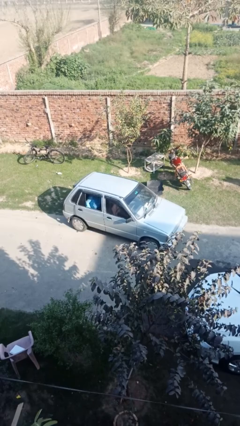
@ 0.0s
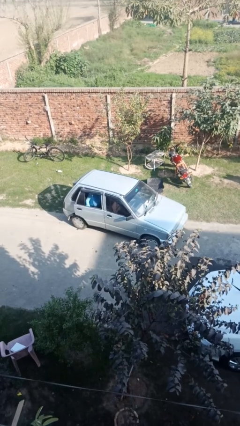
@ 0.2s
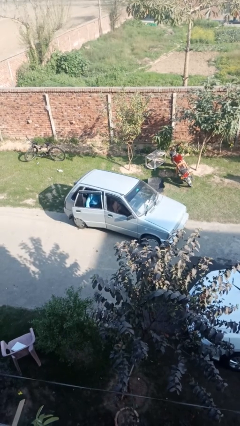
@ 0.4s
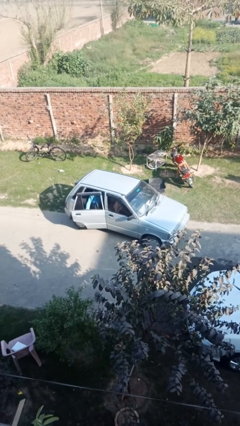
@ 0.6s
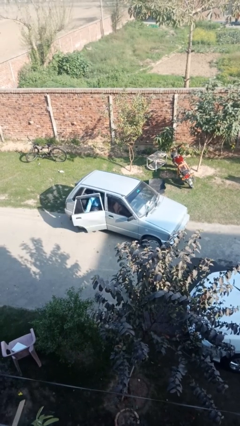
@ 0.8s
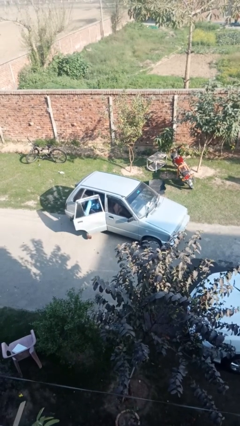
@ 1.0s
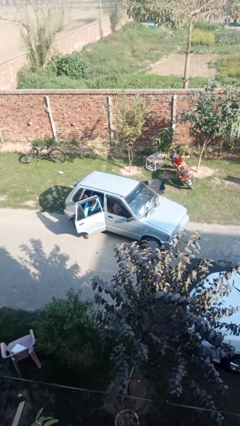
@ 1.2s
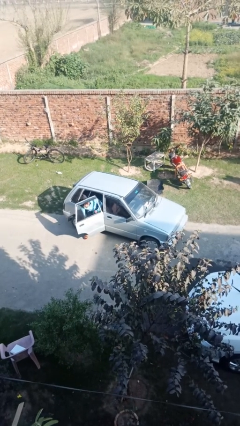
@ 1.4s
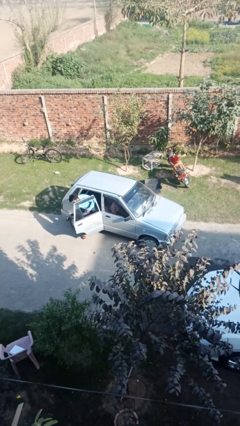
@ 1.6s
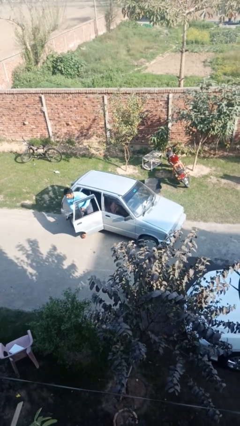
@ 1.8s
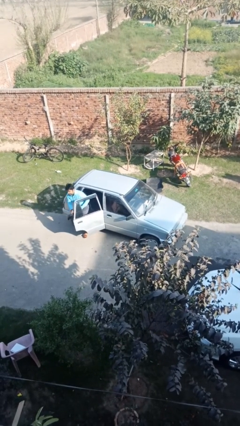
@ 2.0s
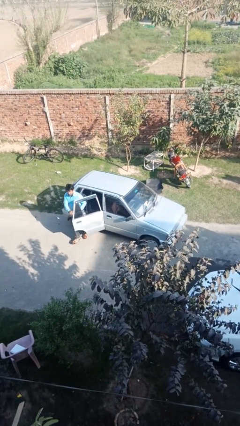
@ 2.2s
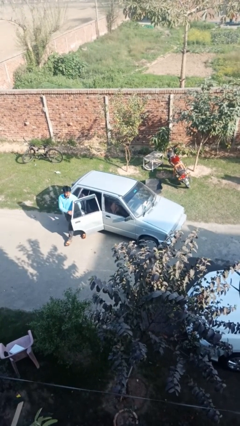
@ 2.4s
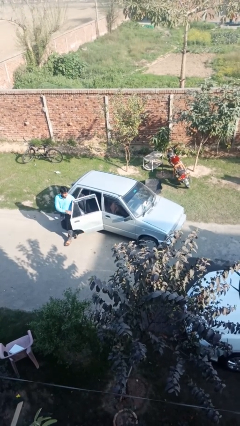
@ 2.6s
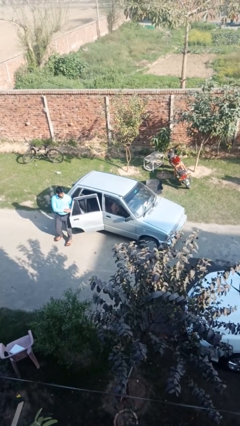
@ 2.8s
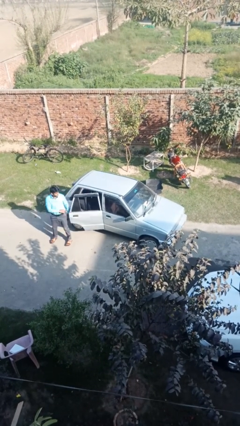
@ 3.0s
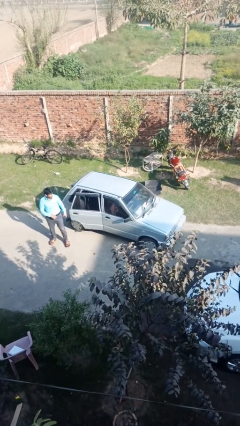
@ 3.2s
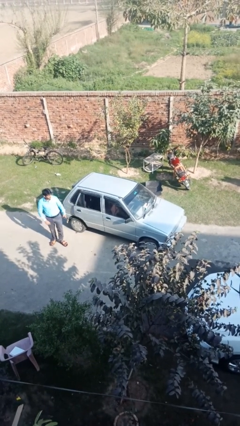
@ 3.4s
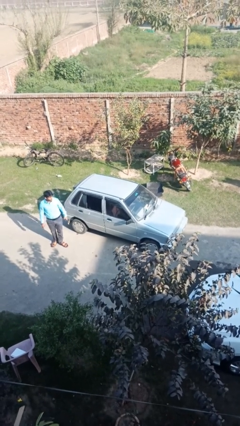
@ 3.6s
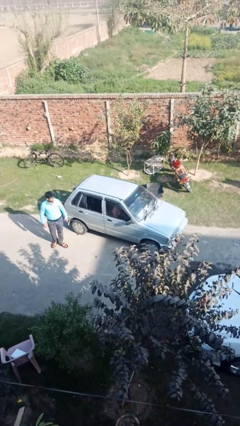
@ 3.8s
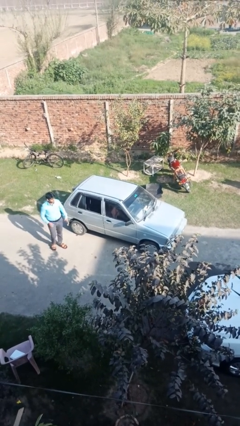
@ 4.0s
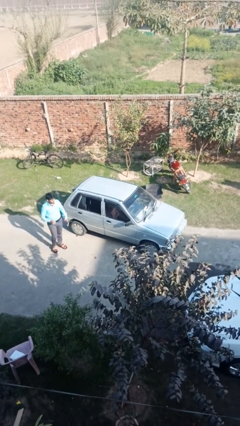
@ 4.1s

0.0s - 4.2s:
car drops off person

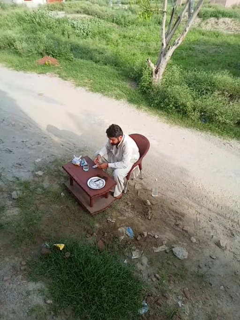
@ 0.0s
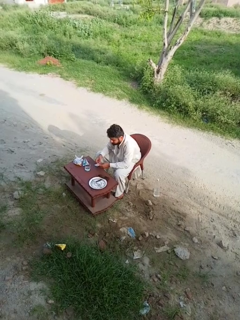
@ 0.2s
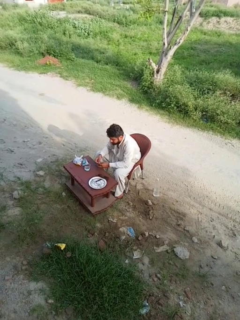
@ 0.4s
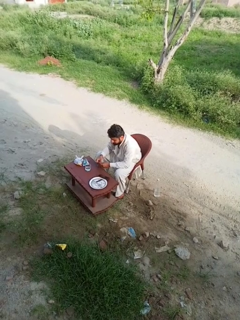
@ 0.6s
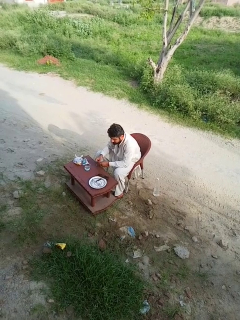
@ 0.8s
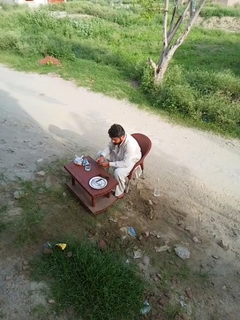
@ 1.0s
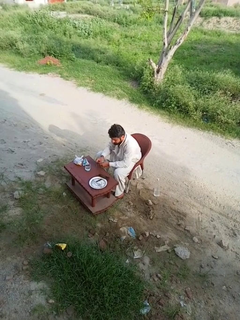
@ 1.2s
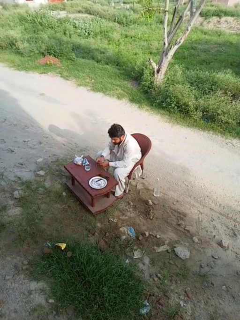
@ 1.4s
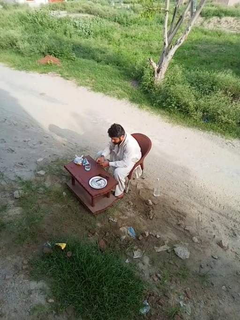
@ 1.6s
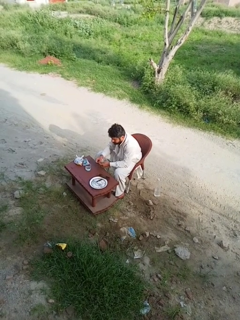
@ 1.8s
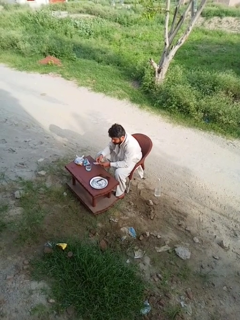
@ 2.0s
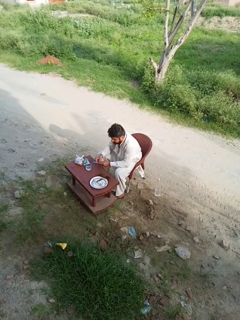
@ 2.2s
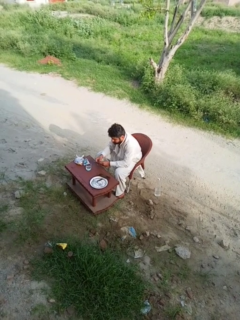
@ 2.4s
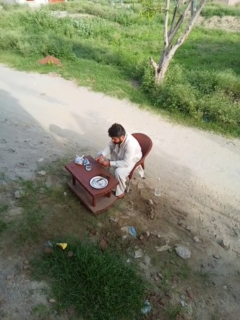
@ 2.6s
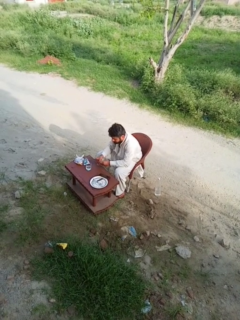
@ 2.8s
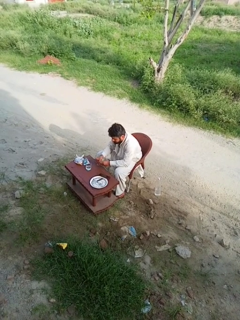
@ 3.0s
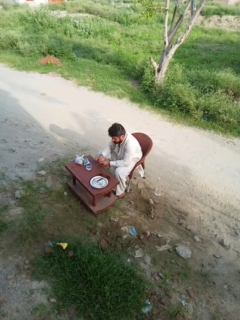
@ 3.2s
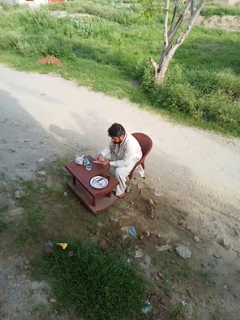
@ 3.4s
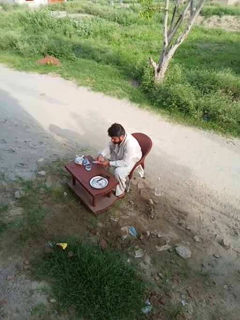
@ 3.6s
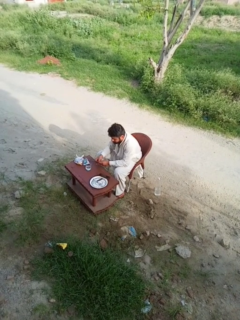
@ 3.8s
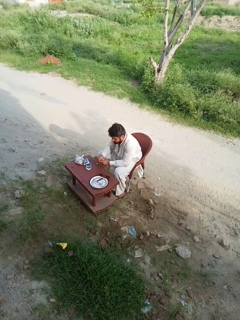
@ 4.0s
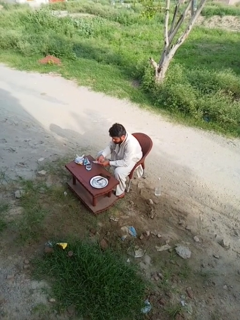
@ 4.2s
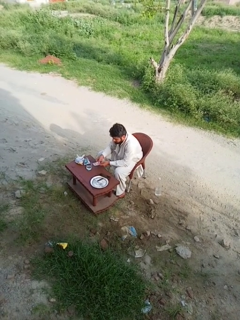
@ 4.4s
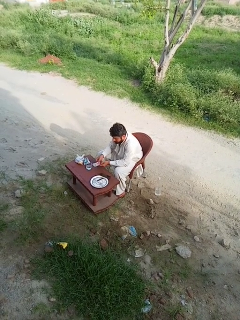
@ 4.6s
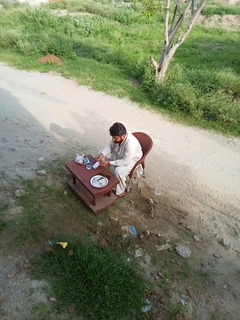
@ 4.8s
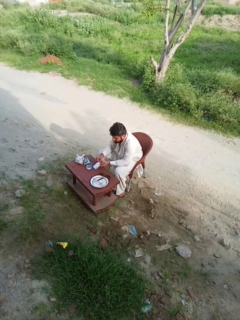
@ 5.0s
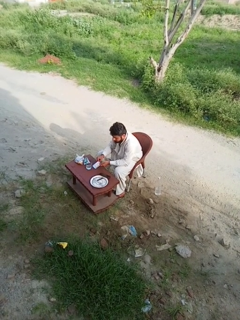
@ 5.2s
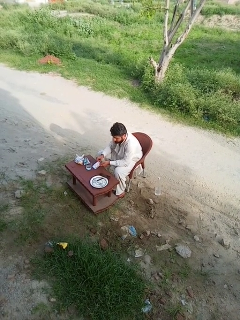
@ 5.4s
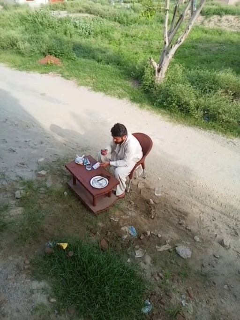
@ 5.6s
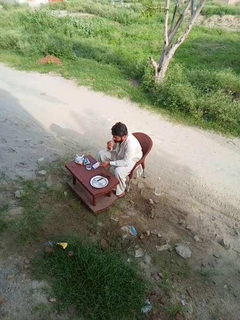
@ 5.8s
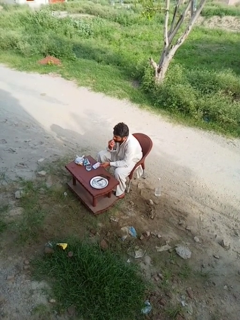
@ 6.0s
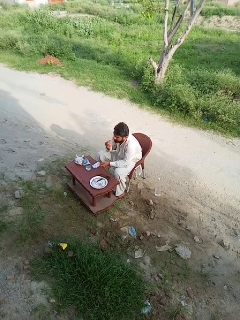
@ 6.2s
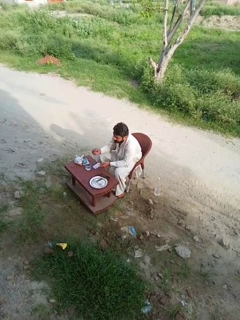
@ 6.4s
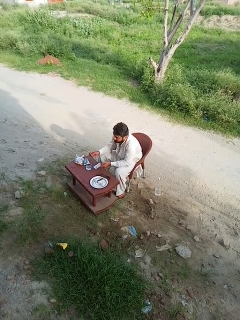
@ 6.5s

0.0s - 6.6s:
person takes medicine pills

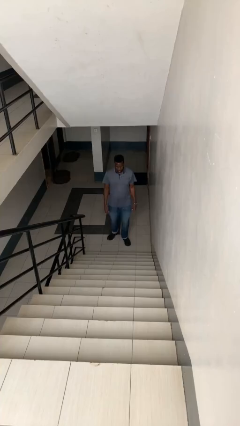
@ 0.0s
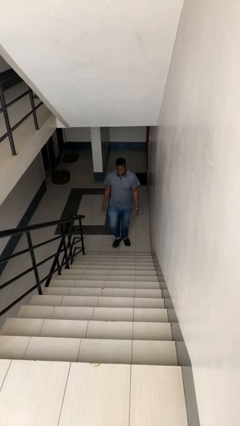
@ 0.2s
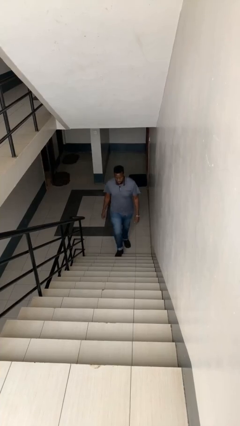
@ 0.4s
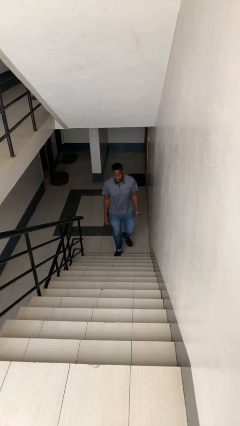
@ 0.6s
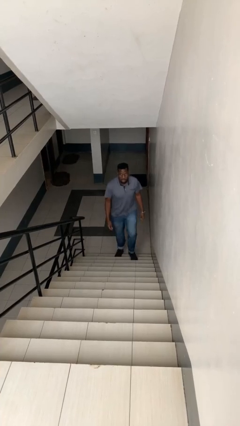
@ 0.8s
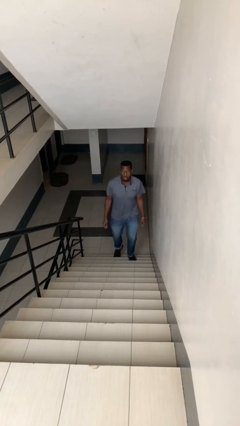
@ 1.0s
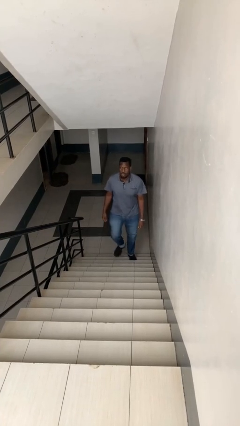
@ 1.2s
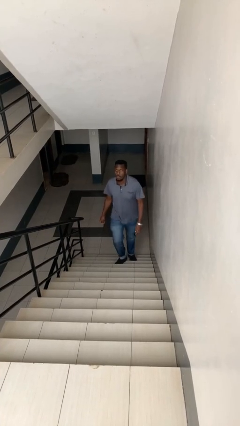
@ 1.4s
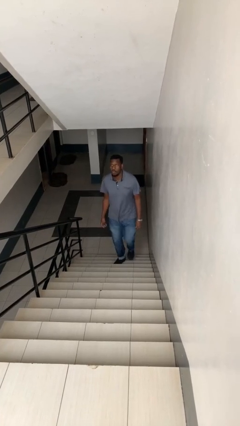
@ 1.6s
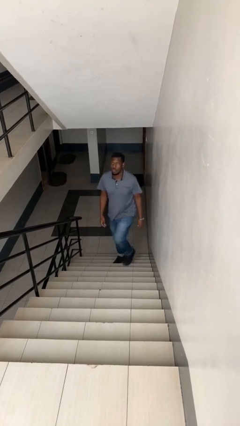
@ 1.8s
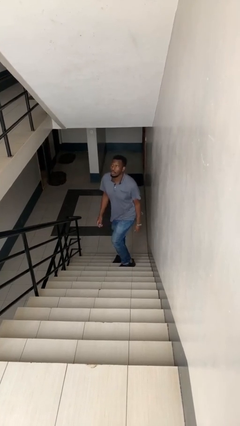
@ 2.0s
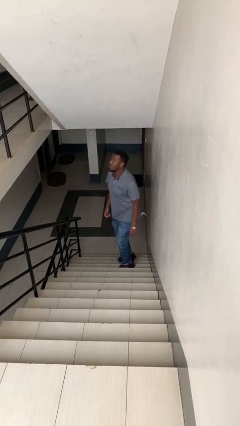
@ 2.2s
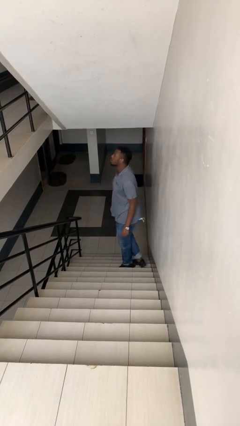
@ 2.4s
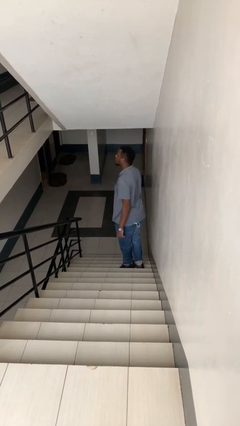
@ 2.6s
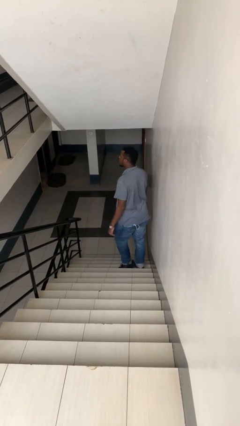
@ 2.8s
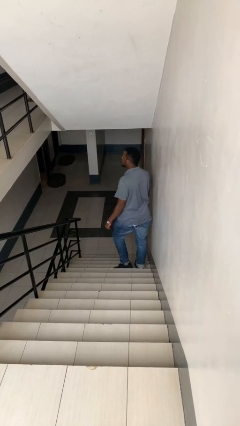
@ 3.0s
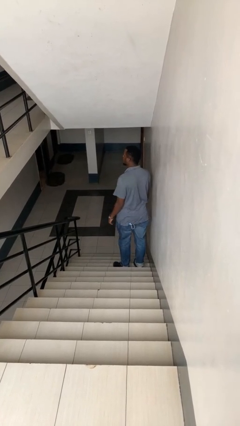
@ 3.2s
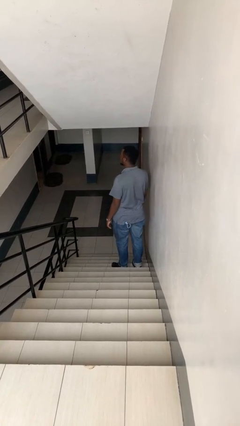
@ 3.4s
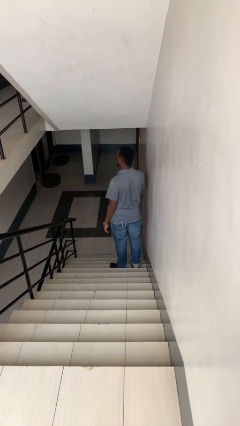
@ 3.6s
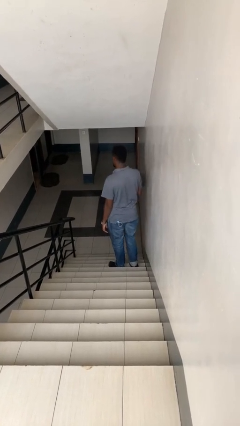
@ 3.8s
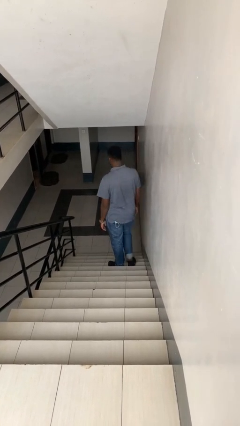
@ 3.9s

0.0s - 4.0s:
person climbs up stairs

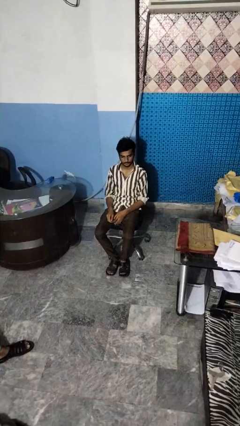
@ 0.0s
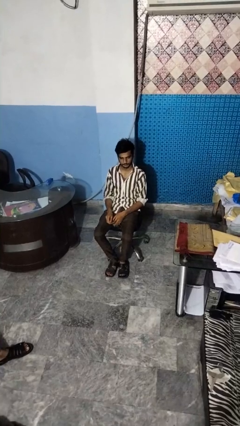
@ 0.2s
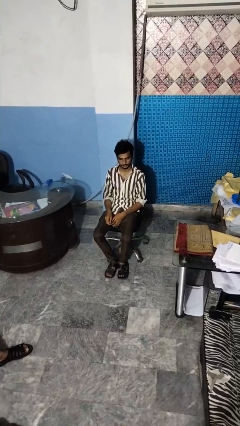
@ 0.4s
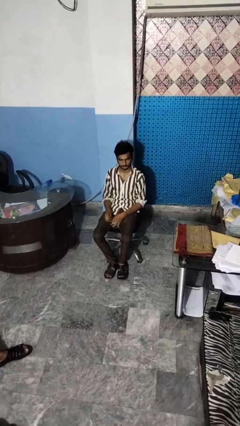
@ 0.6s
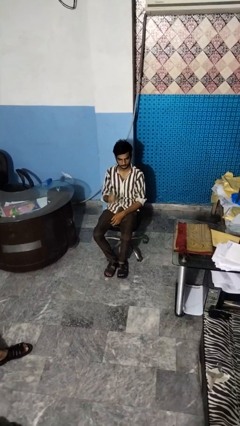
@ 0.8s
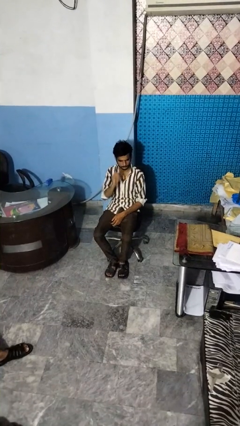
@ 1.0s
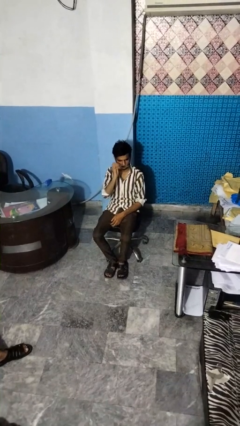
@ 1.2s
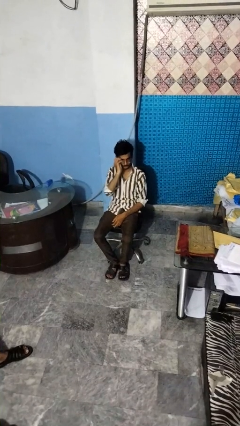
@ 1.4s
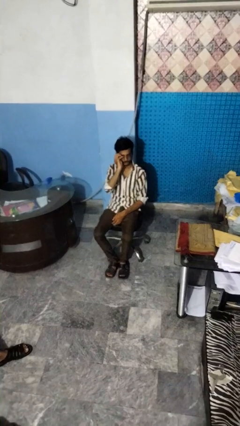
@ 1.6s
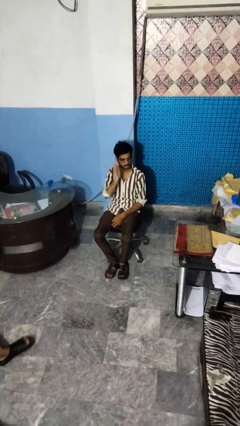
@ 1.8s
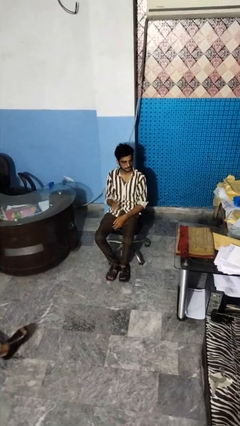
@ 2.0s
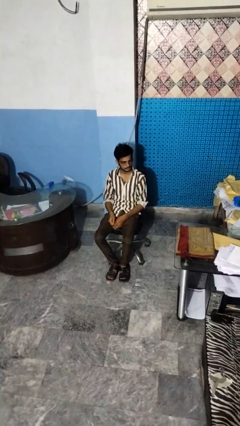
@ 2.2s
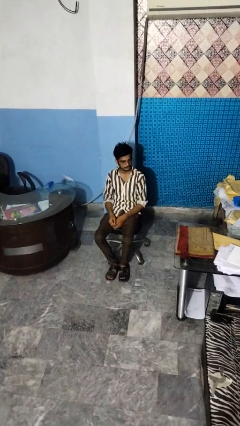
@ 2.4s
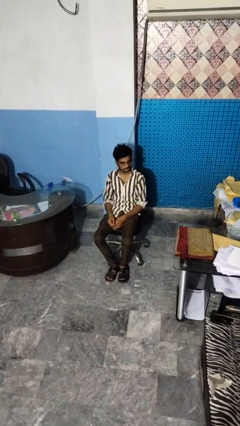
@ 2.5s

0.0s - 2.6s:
person puts on glasses

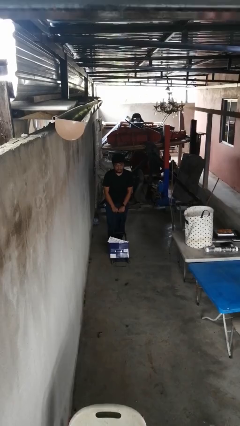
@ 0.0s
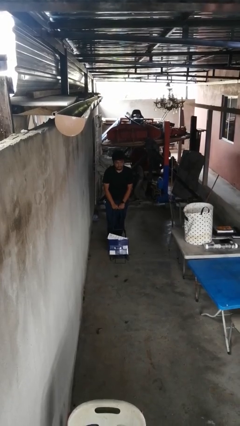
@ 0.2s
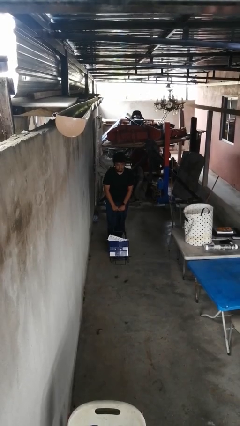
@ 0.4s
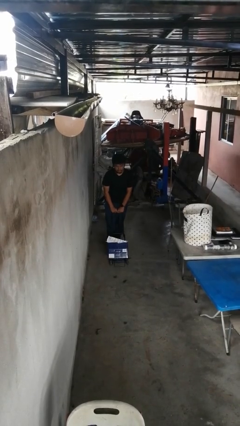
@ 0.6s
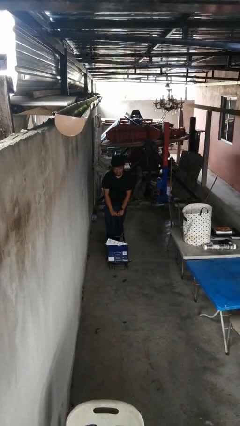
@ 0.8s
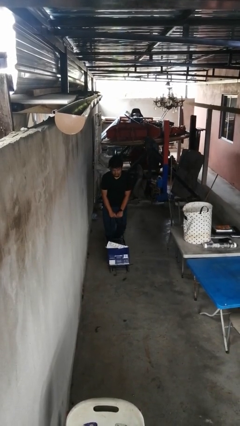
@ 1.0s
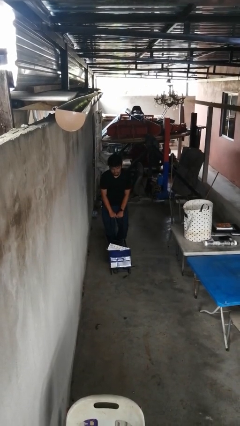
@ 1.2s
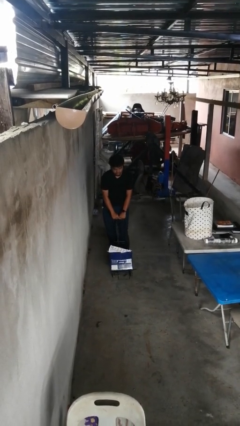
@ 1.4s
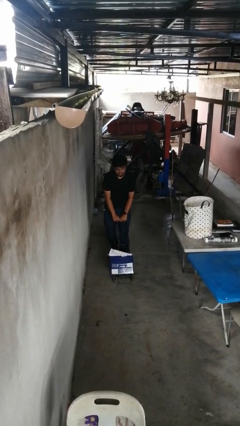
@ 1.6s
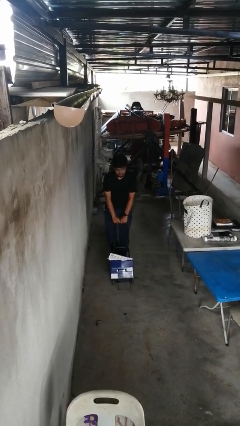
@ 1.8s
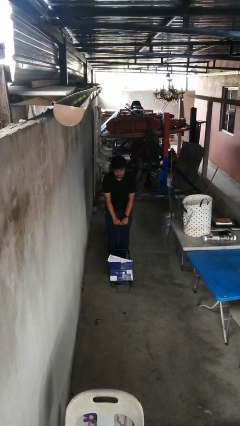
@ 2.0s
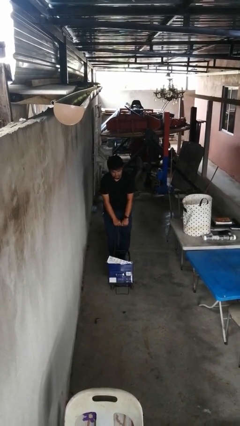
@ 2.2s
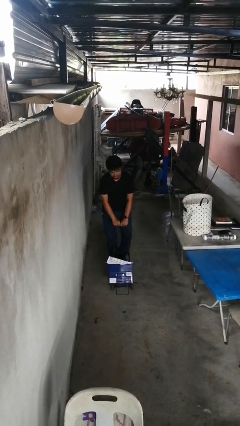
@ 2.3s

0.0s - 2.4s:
person pushes wheeled cart
